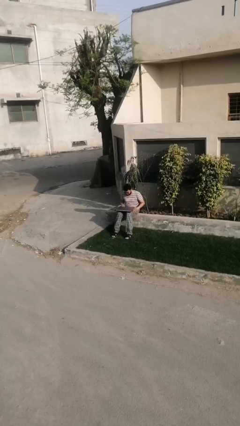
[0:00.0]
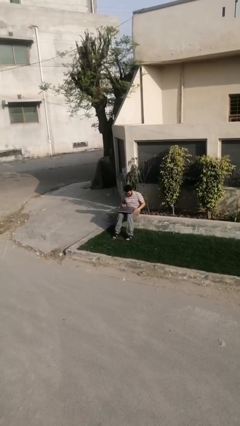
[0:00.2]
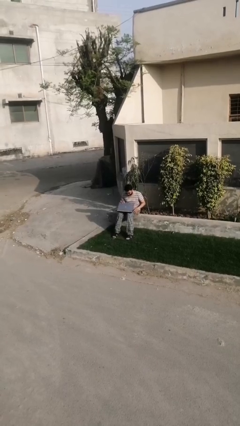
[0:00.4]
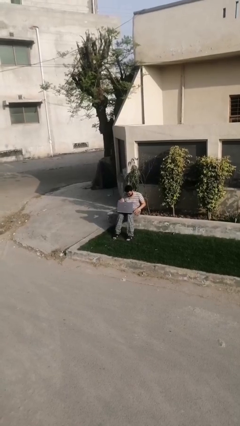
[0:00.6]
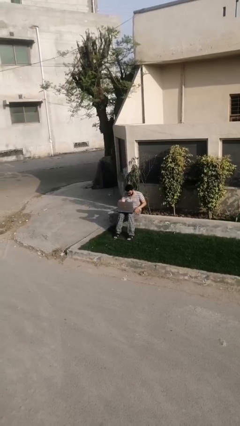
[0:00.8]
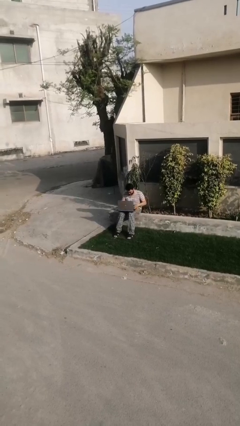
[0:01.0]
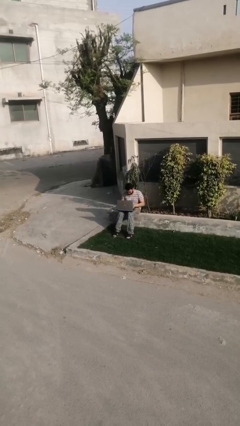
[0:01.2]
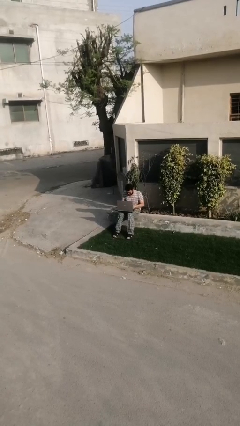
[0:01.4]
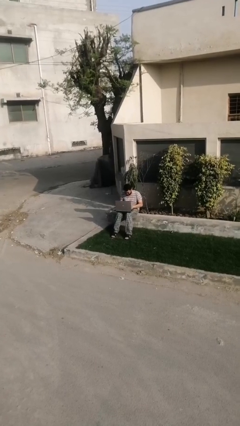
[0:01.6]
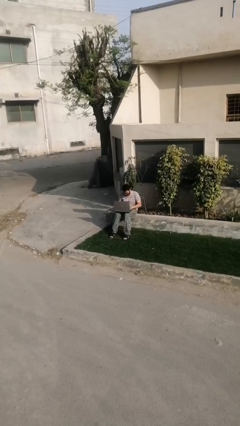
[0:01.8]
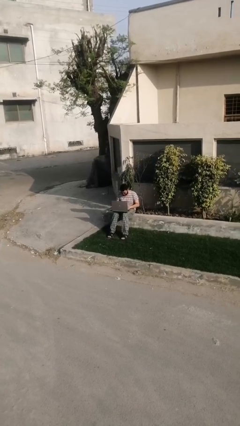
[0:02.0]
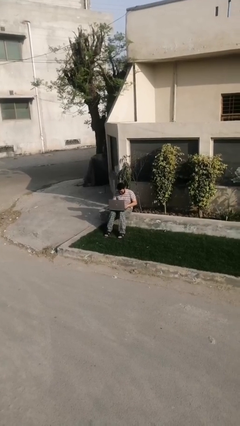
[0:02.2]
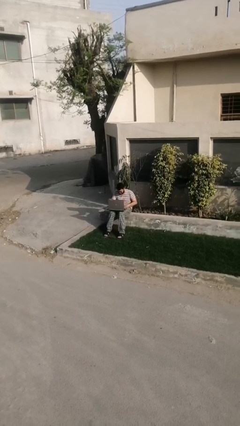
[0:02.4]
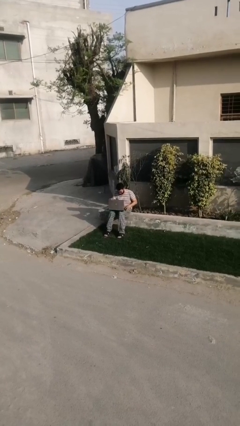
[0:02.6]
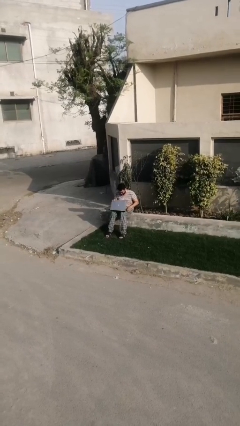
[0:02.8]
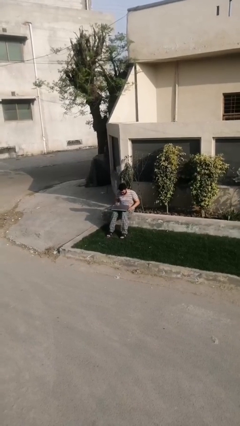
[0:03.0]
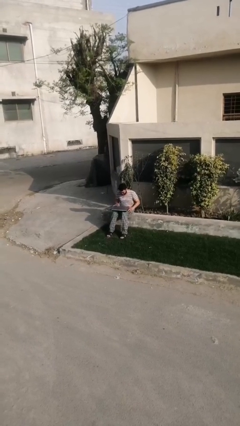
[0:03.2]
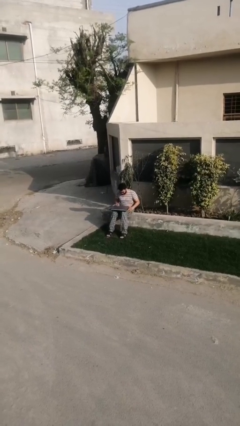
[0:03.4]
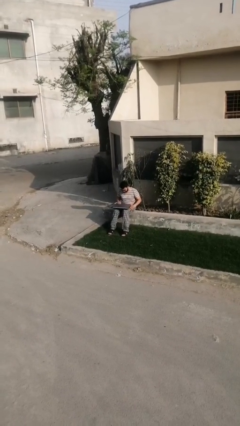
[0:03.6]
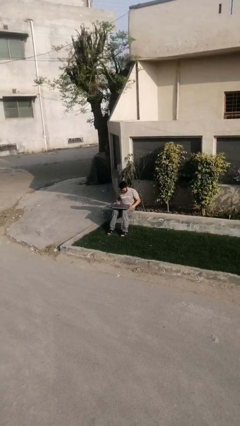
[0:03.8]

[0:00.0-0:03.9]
person interacts with laptop

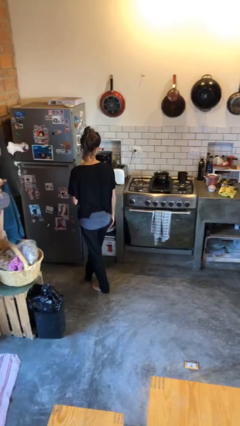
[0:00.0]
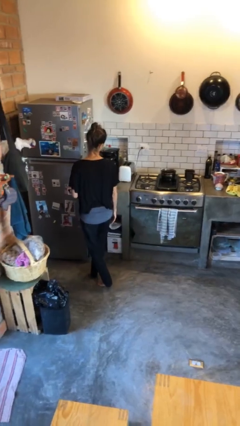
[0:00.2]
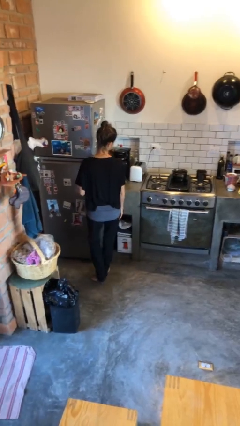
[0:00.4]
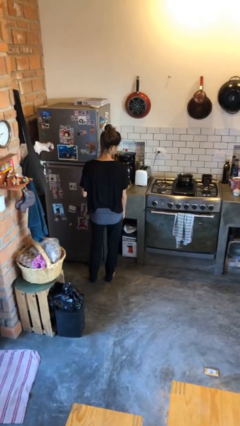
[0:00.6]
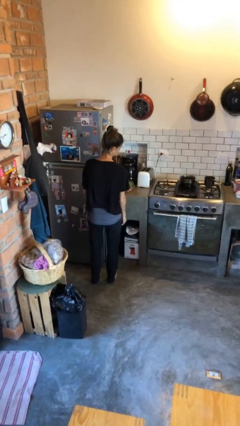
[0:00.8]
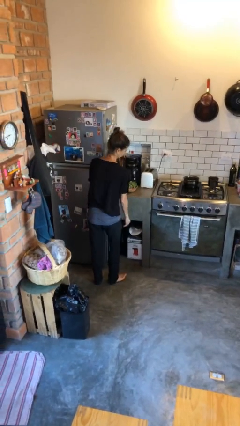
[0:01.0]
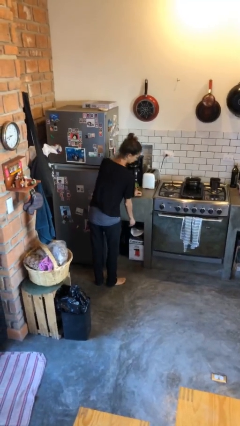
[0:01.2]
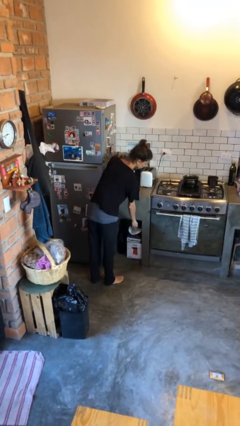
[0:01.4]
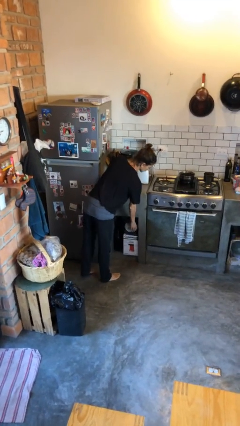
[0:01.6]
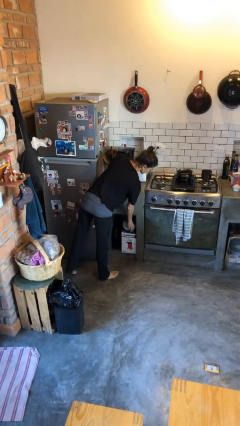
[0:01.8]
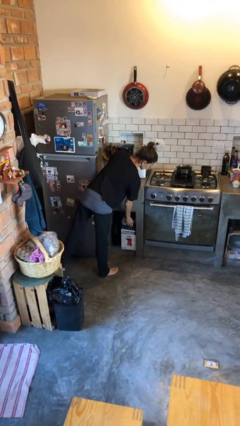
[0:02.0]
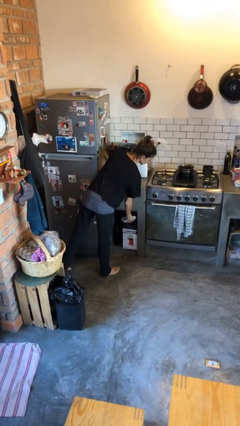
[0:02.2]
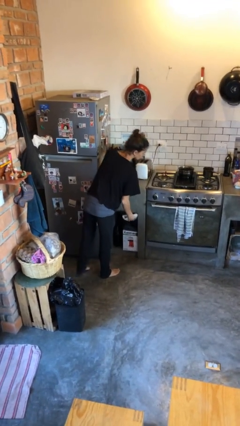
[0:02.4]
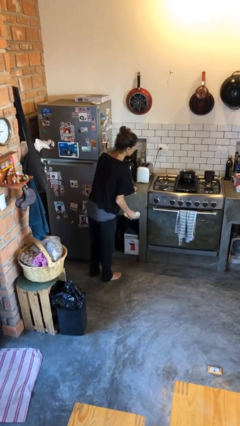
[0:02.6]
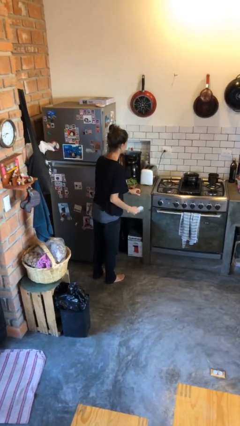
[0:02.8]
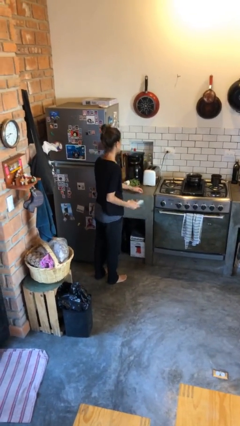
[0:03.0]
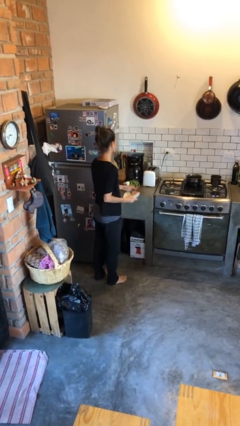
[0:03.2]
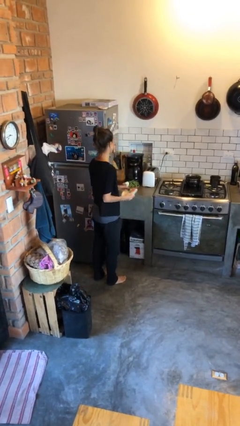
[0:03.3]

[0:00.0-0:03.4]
person picks up object from cabinet

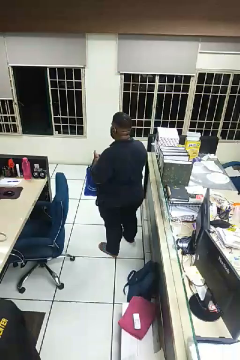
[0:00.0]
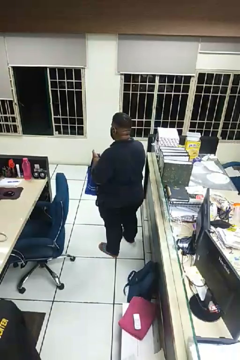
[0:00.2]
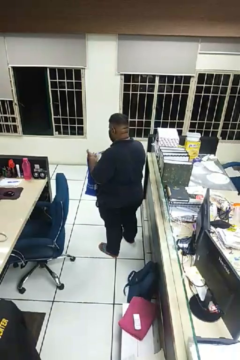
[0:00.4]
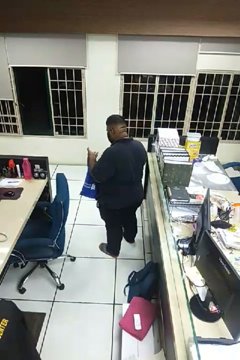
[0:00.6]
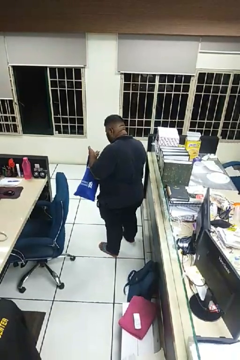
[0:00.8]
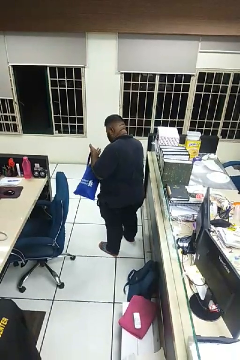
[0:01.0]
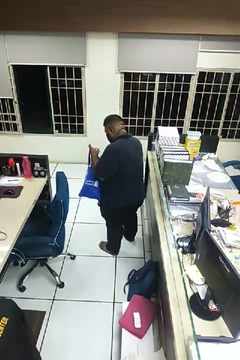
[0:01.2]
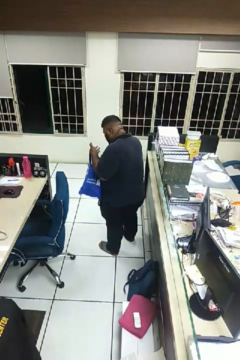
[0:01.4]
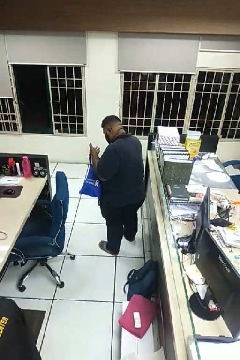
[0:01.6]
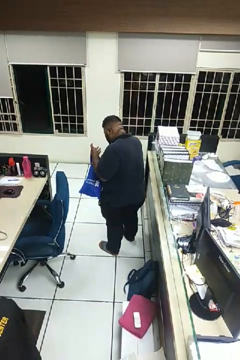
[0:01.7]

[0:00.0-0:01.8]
person searches in bag

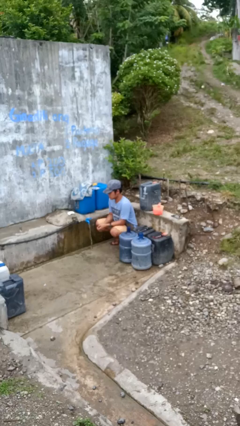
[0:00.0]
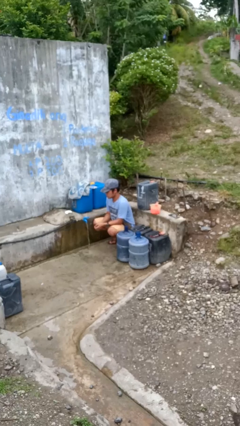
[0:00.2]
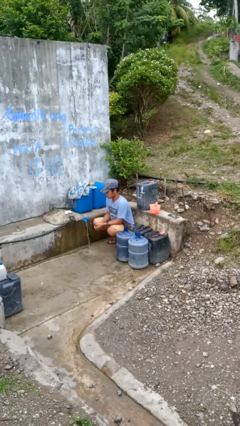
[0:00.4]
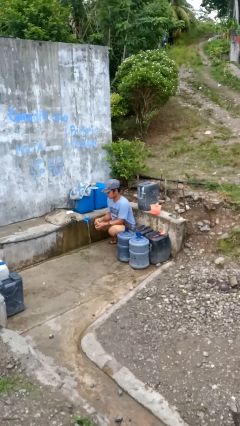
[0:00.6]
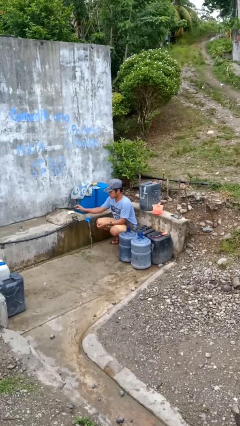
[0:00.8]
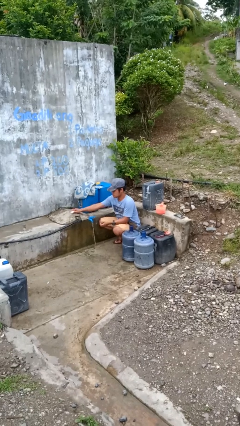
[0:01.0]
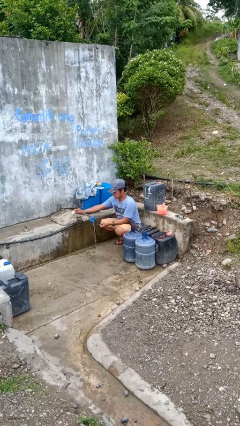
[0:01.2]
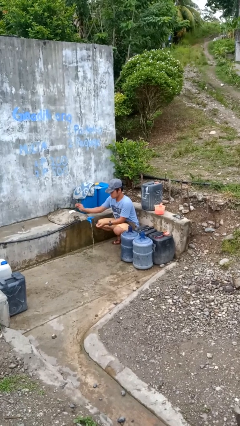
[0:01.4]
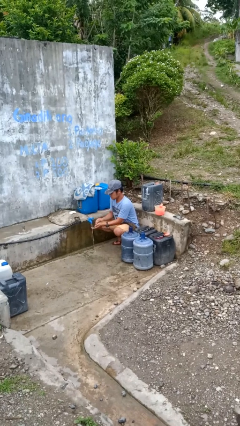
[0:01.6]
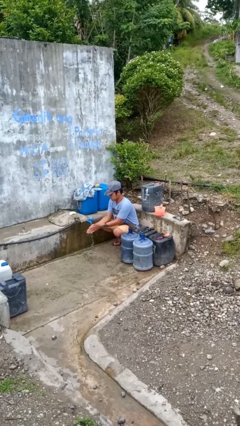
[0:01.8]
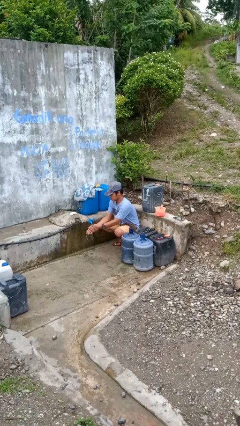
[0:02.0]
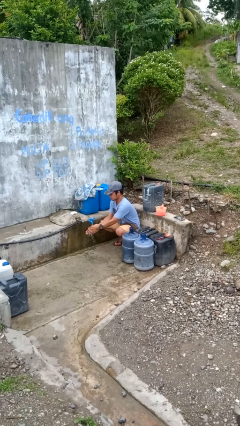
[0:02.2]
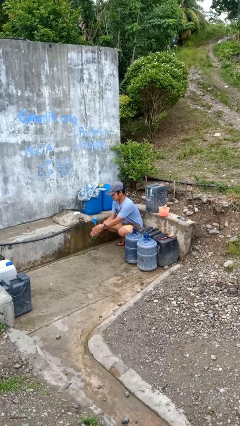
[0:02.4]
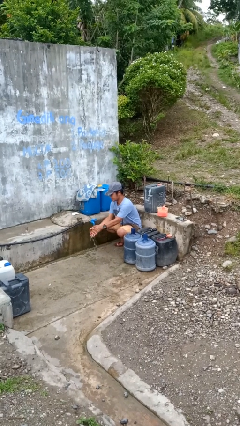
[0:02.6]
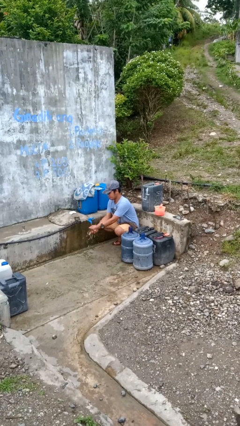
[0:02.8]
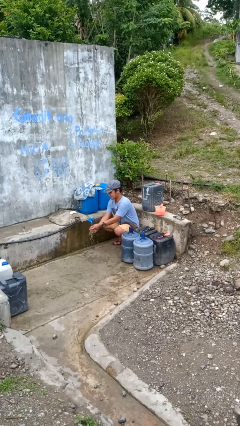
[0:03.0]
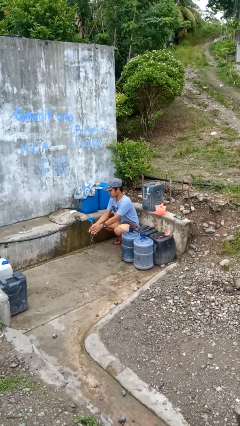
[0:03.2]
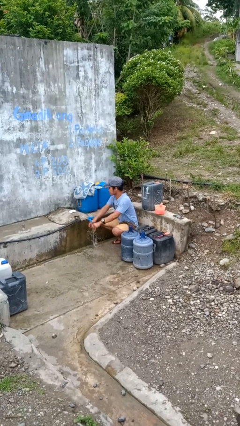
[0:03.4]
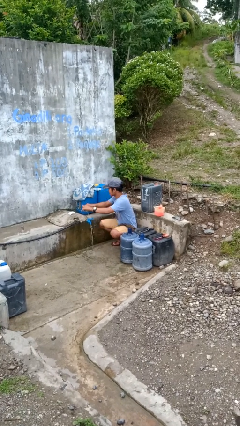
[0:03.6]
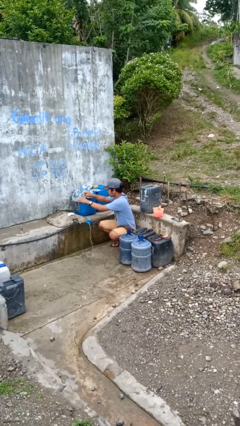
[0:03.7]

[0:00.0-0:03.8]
person washes hands

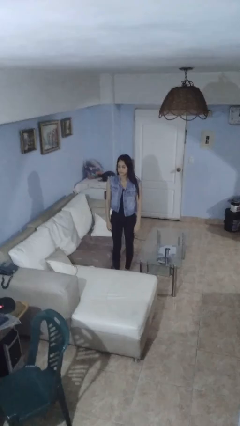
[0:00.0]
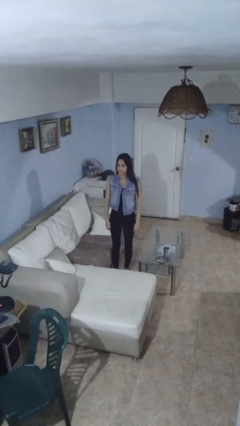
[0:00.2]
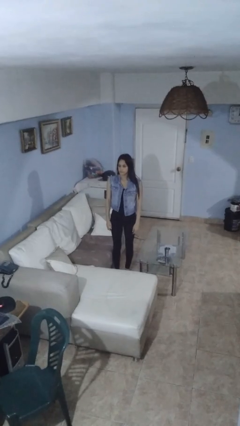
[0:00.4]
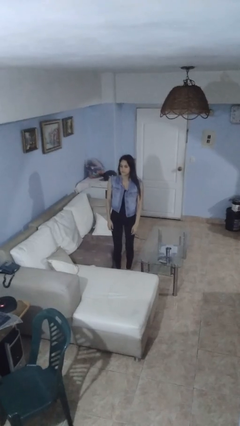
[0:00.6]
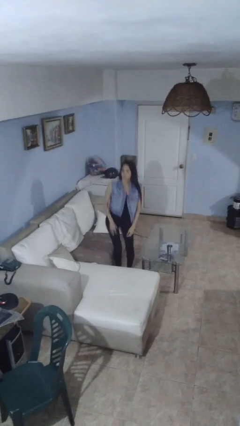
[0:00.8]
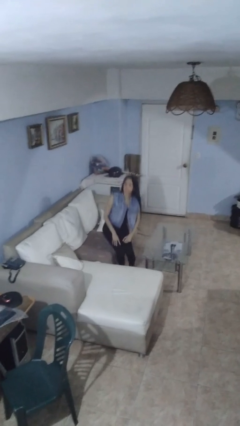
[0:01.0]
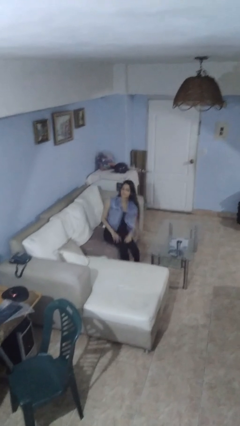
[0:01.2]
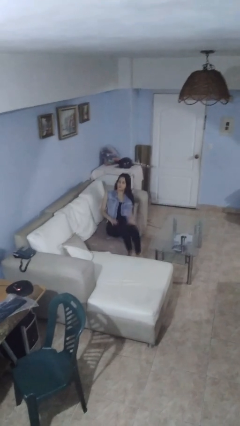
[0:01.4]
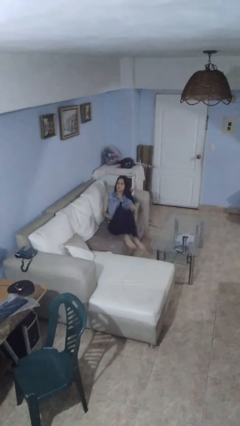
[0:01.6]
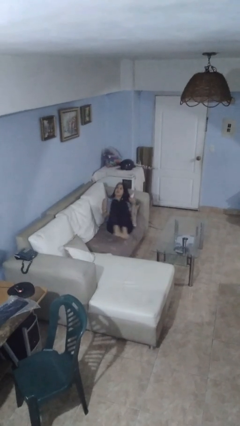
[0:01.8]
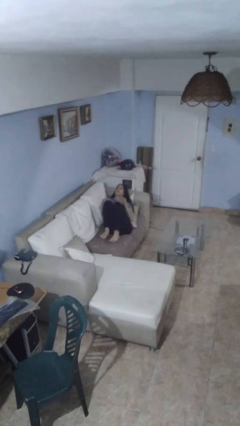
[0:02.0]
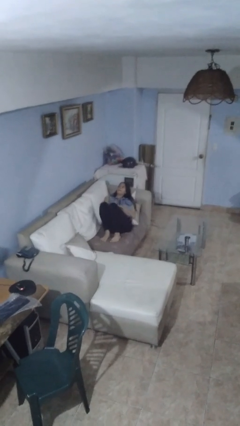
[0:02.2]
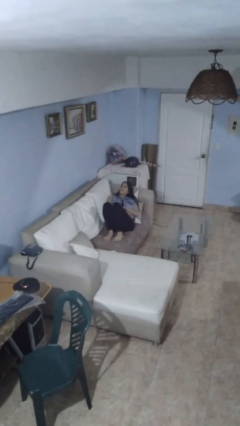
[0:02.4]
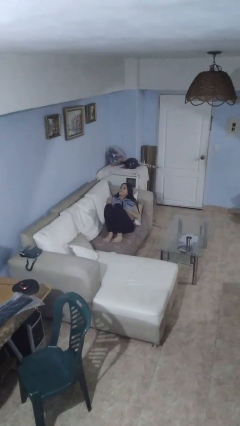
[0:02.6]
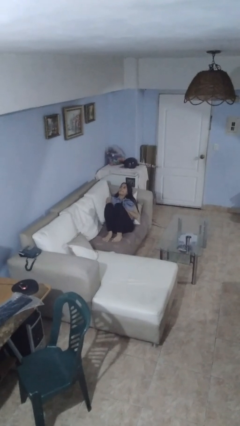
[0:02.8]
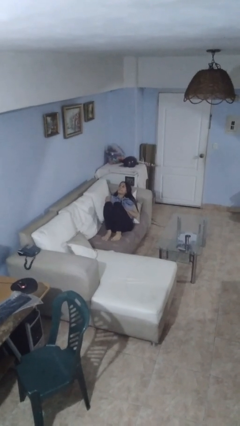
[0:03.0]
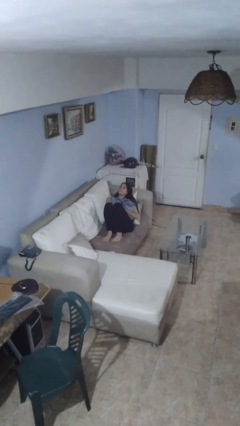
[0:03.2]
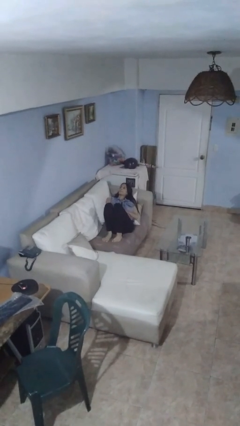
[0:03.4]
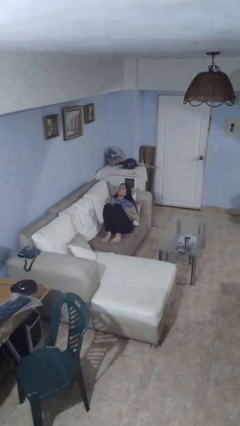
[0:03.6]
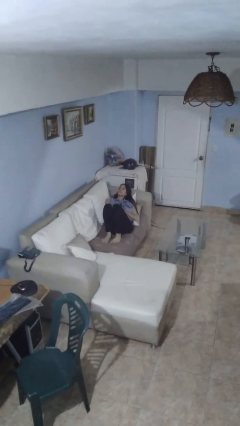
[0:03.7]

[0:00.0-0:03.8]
person lies down on couch

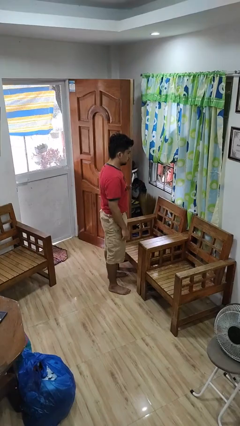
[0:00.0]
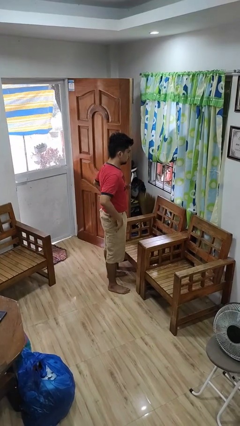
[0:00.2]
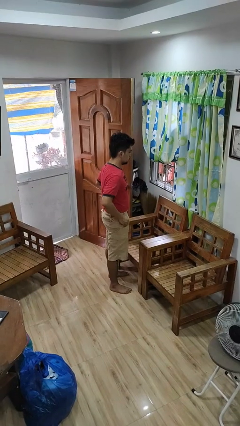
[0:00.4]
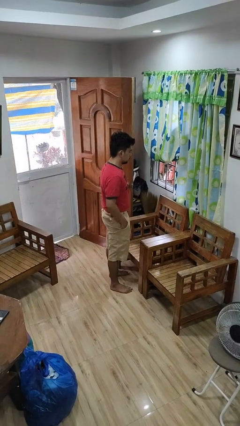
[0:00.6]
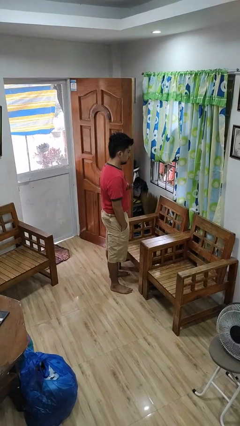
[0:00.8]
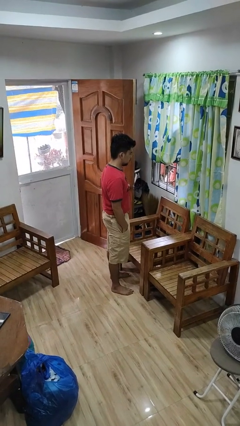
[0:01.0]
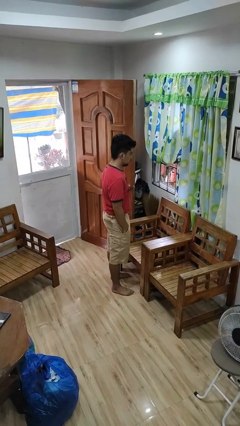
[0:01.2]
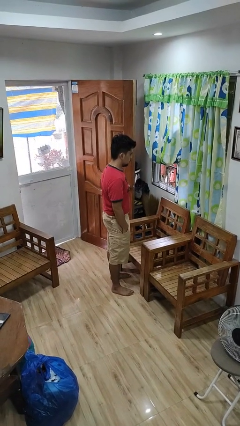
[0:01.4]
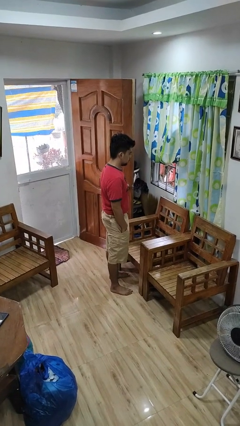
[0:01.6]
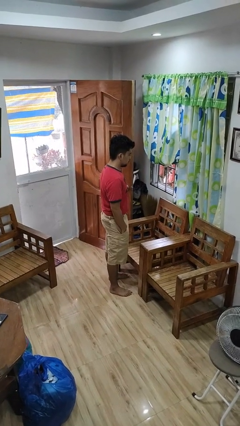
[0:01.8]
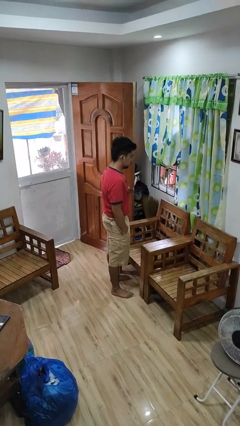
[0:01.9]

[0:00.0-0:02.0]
person puts hands in back pockets
